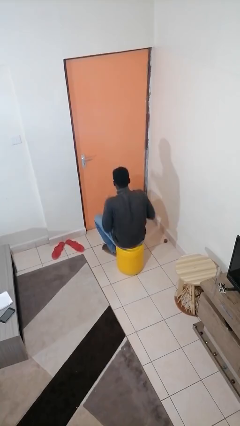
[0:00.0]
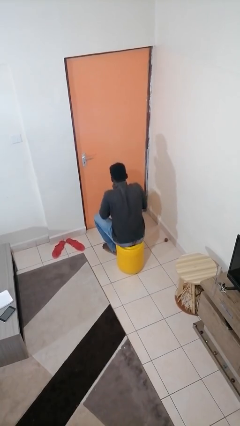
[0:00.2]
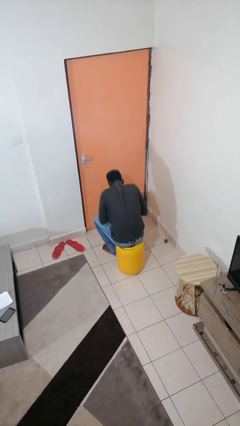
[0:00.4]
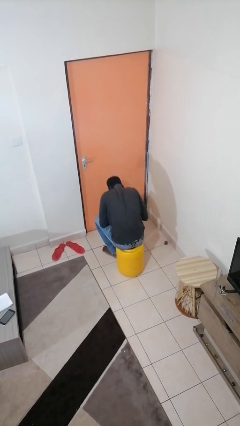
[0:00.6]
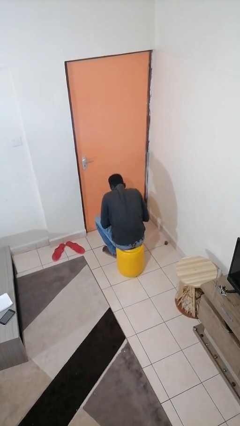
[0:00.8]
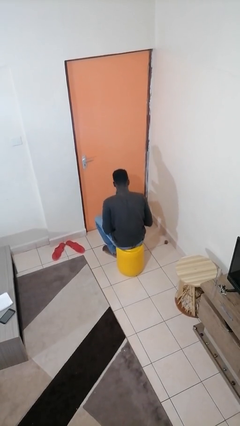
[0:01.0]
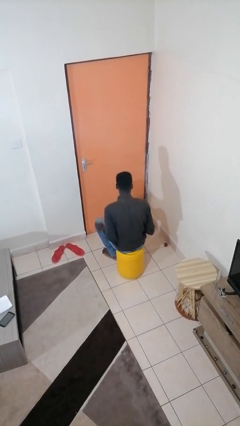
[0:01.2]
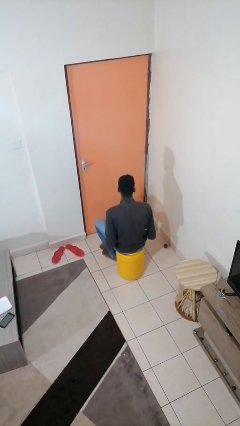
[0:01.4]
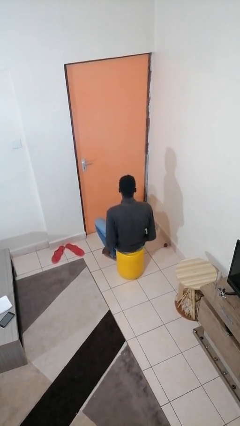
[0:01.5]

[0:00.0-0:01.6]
person sneezes into hand

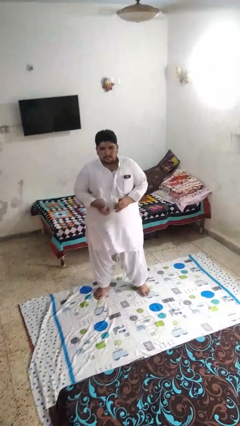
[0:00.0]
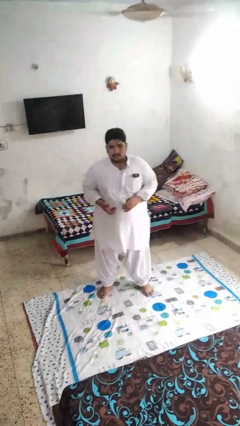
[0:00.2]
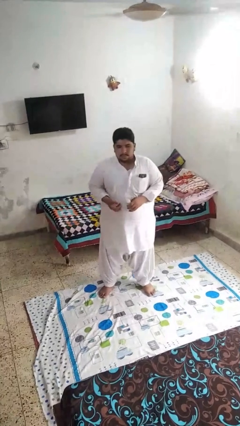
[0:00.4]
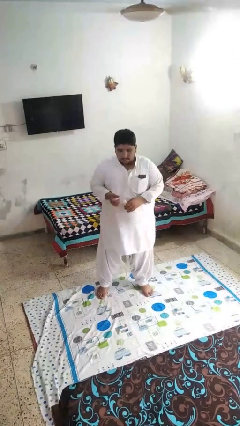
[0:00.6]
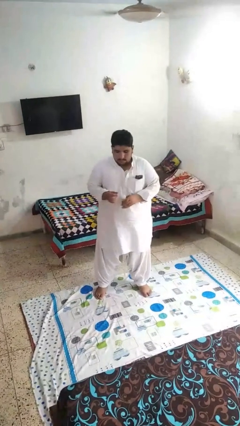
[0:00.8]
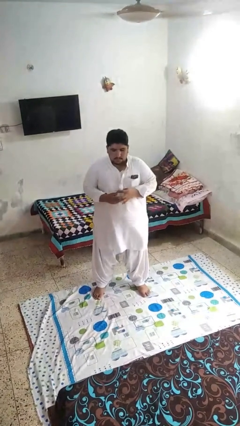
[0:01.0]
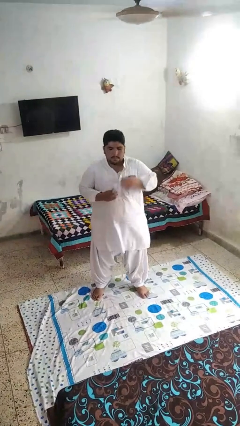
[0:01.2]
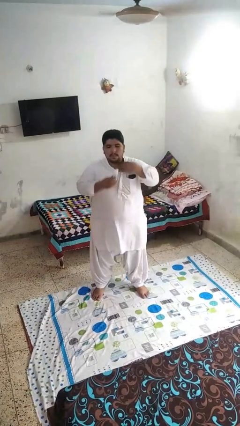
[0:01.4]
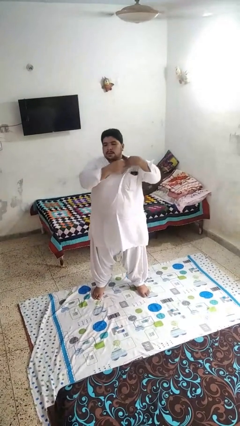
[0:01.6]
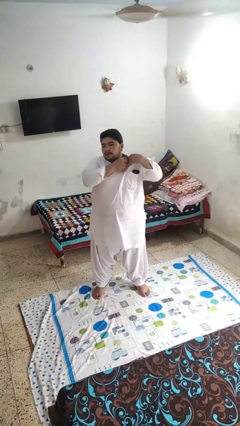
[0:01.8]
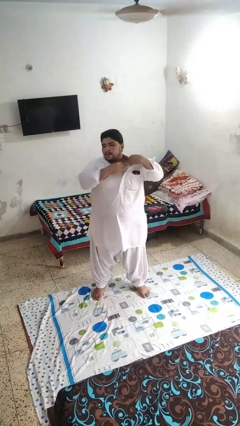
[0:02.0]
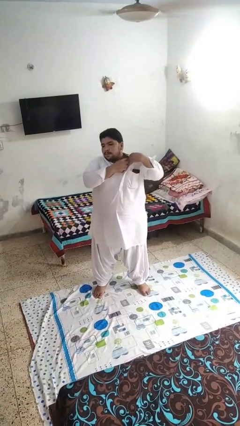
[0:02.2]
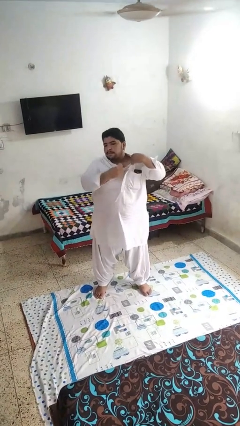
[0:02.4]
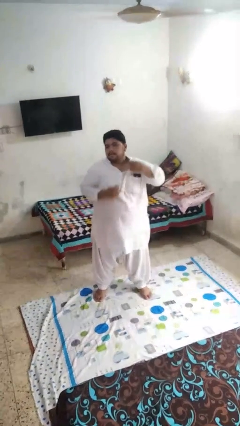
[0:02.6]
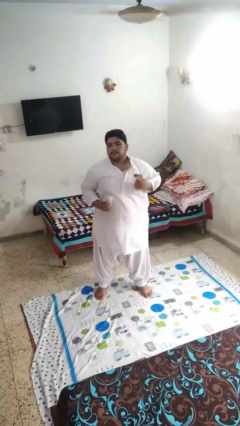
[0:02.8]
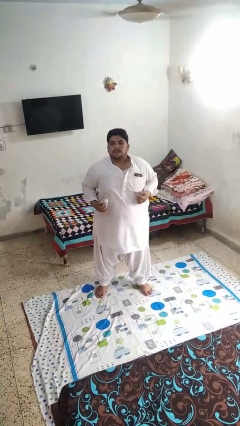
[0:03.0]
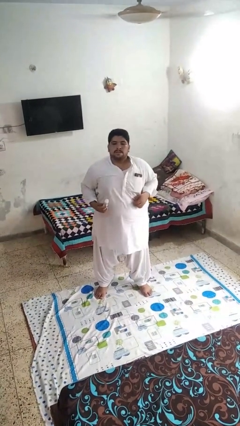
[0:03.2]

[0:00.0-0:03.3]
person applies deodorant

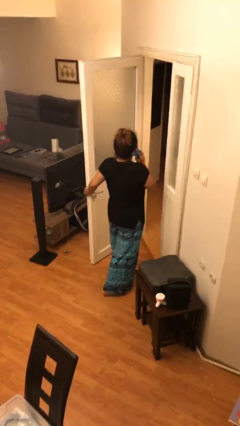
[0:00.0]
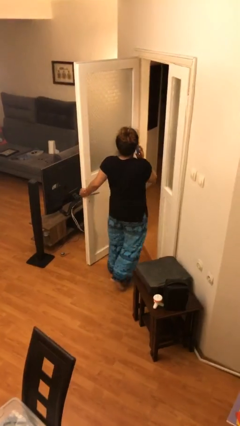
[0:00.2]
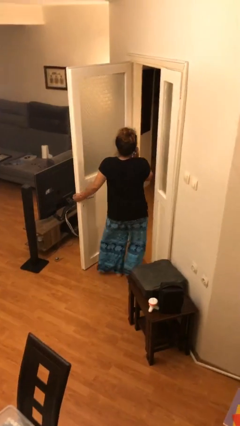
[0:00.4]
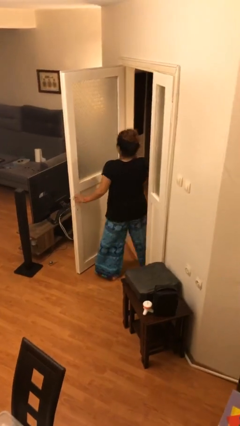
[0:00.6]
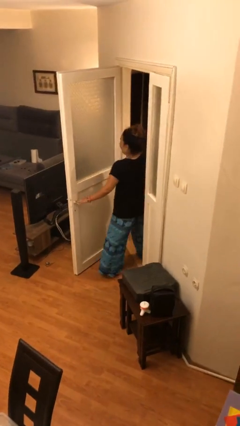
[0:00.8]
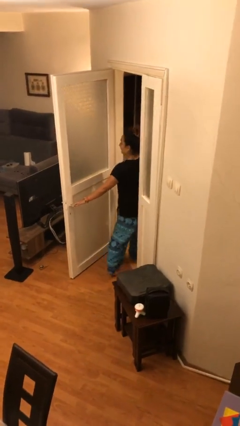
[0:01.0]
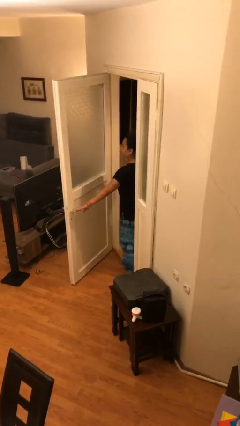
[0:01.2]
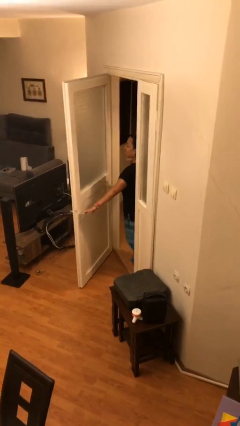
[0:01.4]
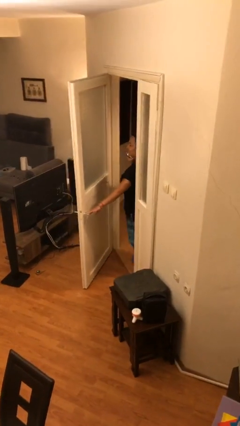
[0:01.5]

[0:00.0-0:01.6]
person exits scene through structure

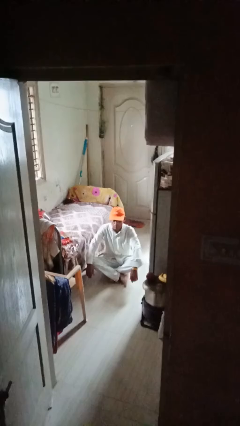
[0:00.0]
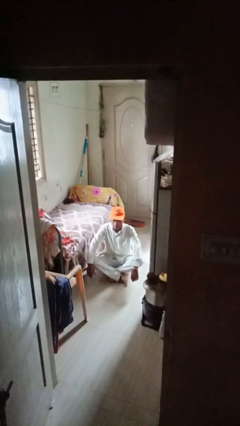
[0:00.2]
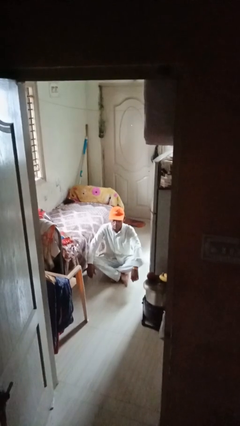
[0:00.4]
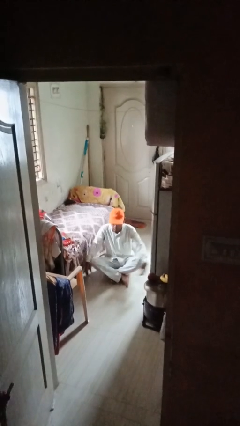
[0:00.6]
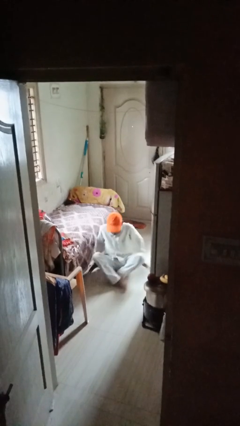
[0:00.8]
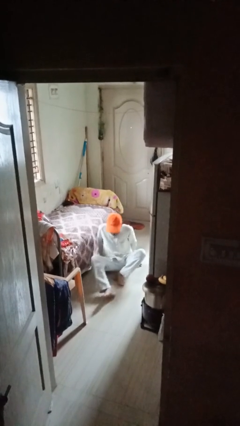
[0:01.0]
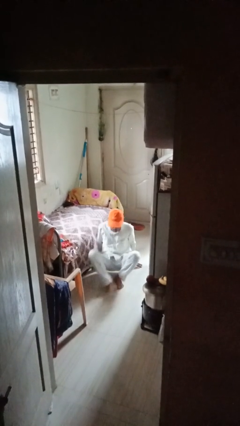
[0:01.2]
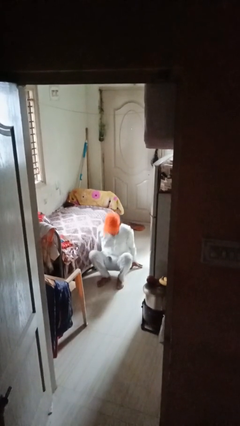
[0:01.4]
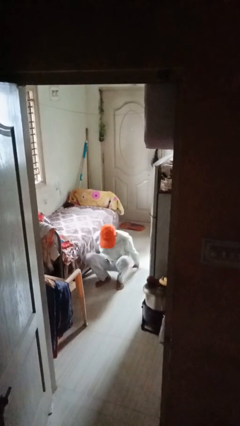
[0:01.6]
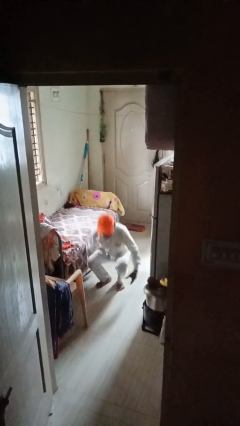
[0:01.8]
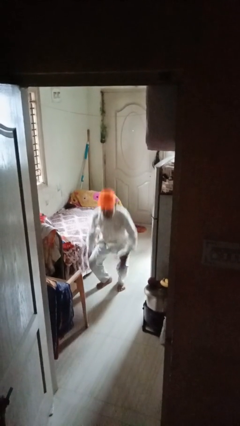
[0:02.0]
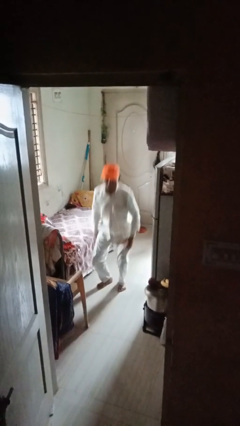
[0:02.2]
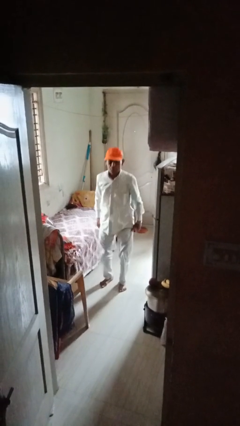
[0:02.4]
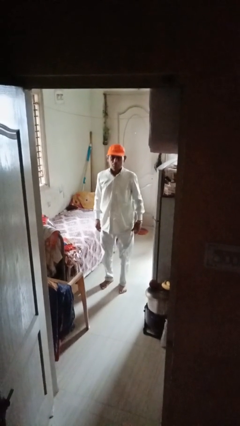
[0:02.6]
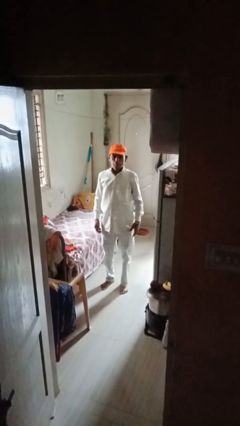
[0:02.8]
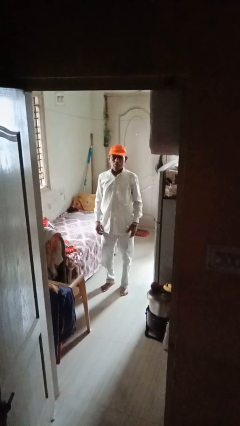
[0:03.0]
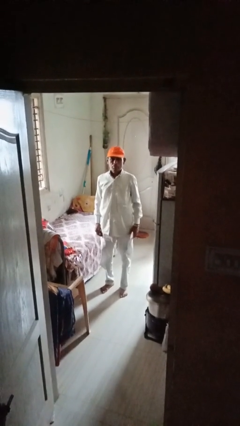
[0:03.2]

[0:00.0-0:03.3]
person stands up from floor

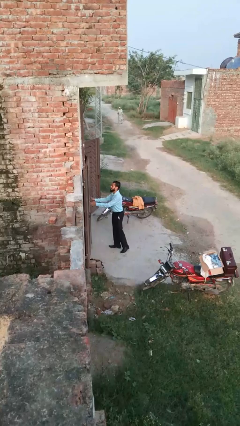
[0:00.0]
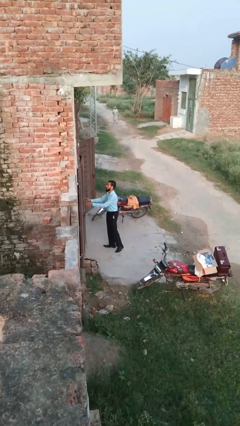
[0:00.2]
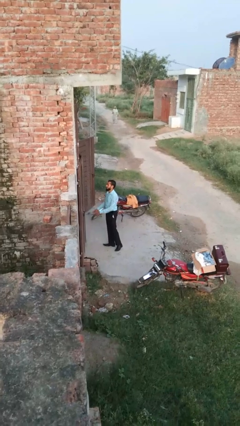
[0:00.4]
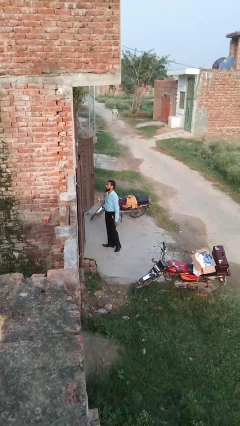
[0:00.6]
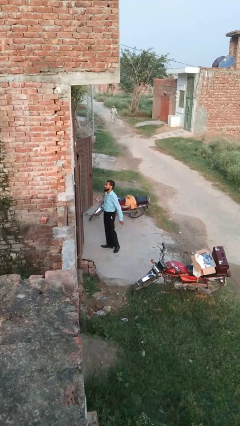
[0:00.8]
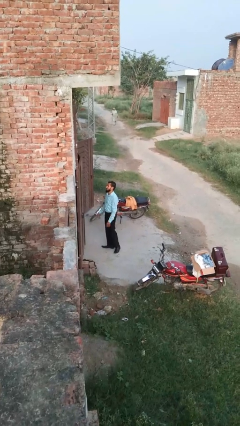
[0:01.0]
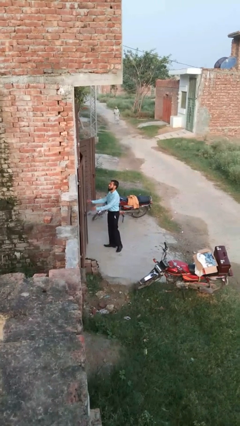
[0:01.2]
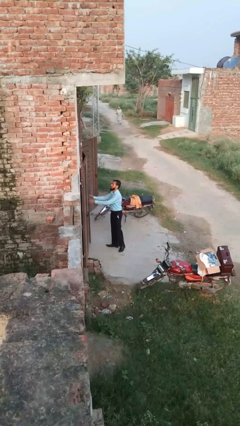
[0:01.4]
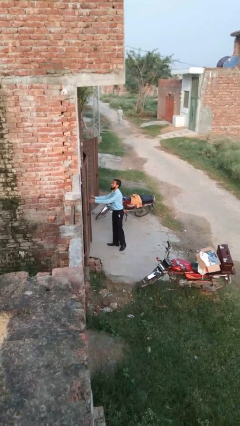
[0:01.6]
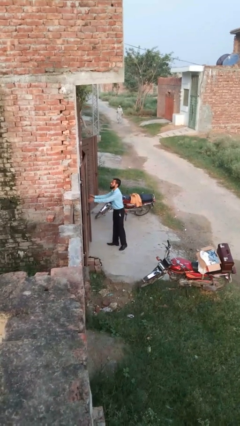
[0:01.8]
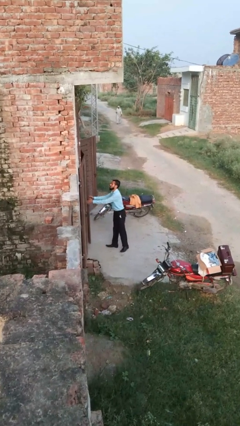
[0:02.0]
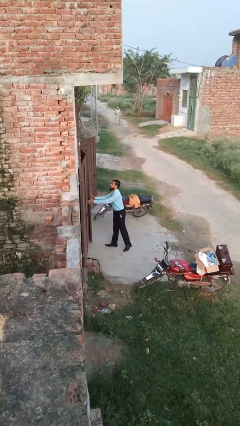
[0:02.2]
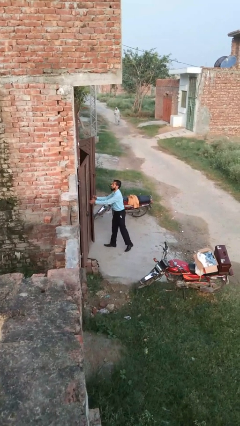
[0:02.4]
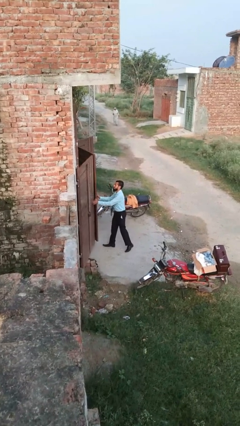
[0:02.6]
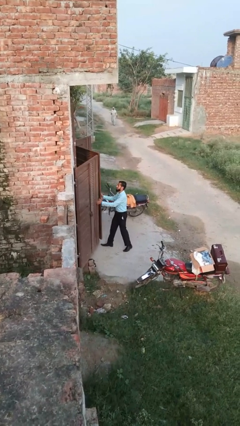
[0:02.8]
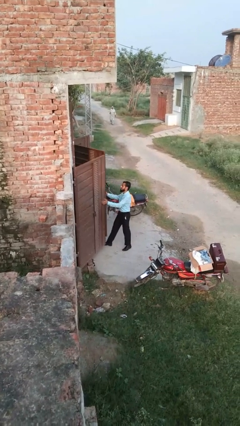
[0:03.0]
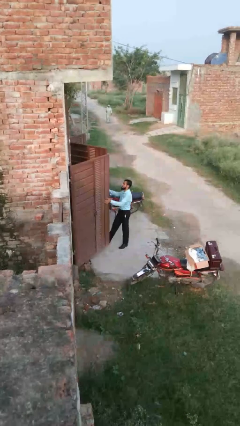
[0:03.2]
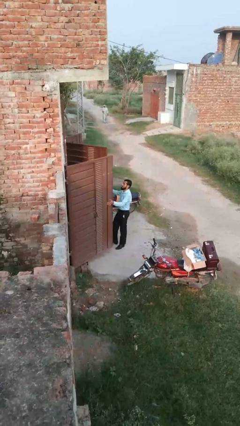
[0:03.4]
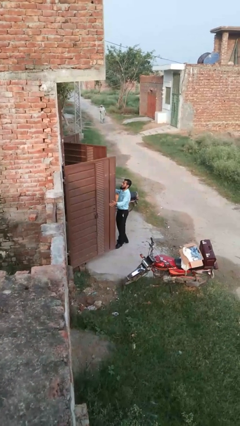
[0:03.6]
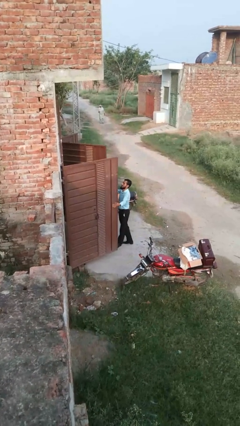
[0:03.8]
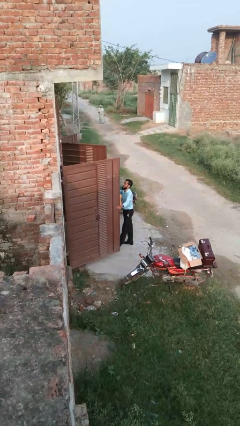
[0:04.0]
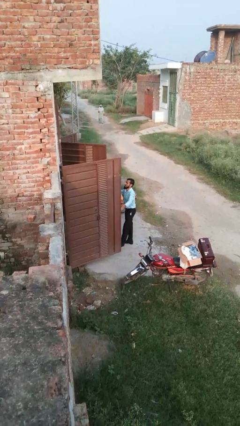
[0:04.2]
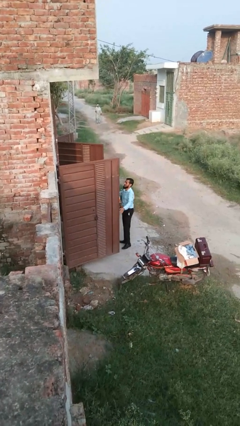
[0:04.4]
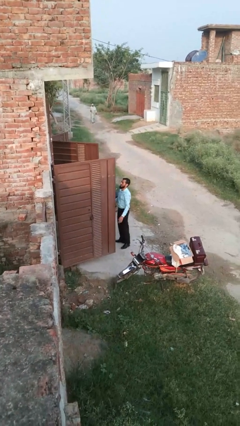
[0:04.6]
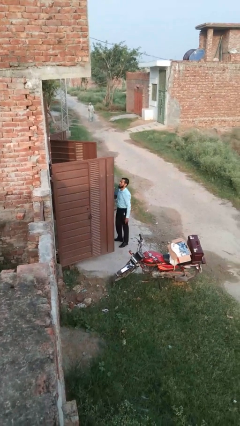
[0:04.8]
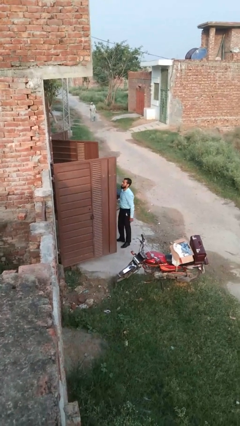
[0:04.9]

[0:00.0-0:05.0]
person opens gate

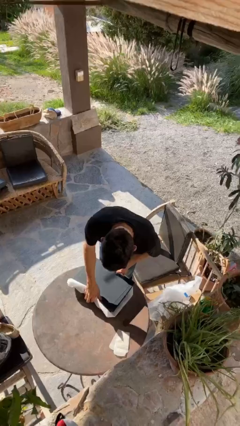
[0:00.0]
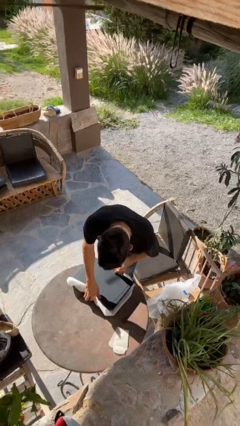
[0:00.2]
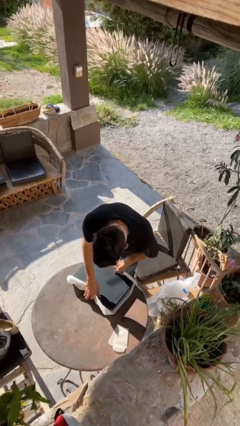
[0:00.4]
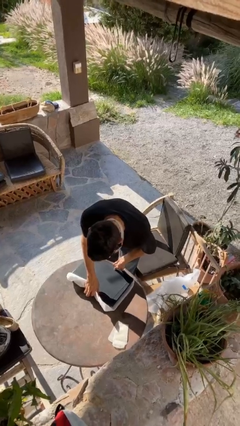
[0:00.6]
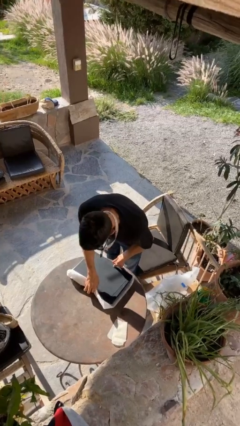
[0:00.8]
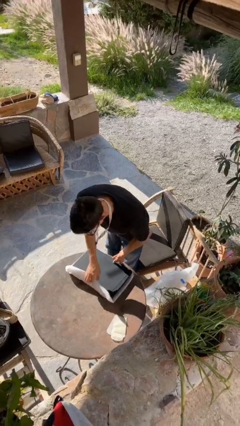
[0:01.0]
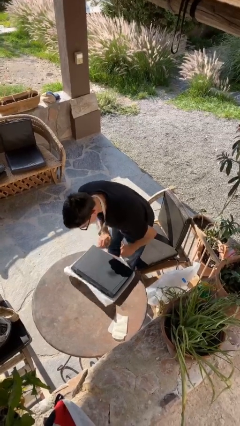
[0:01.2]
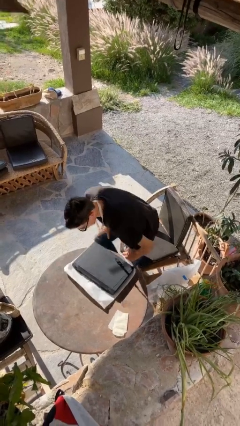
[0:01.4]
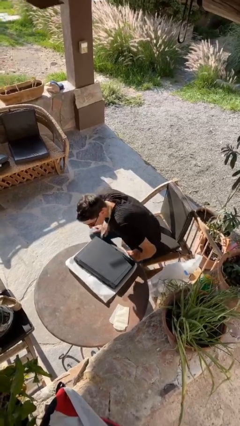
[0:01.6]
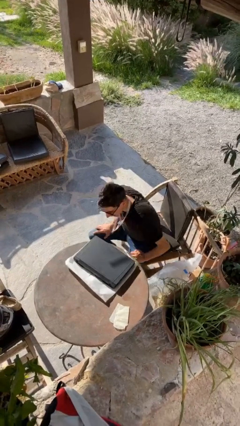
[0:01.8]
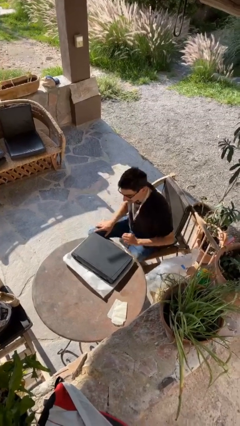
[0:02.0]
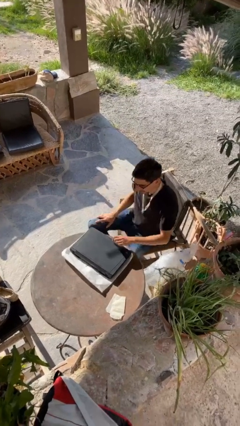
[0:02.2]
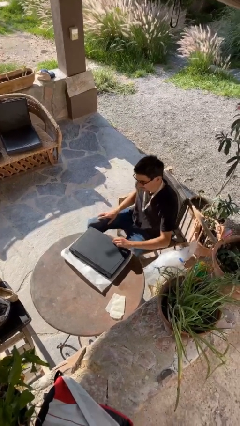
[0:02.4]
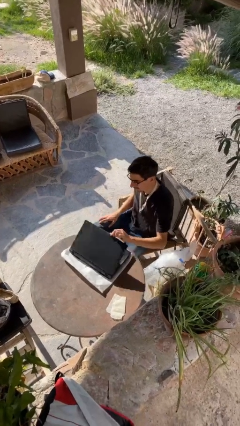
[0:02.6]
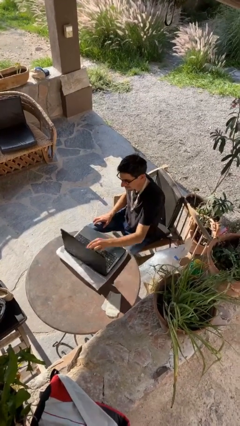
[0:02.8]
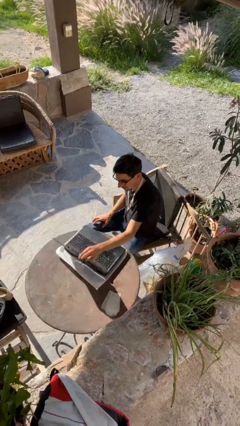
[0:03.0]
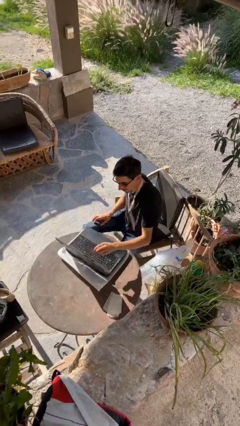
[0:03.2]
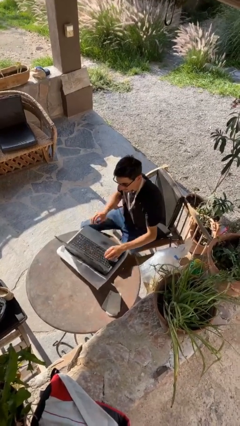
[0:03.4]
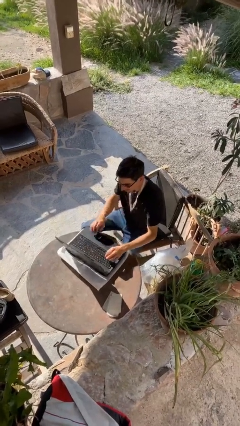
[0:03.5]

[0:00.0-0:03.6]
person sits down
